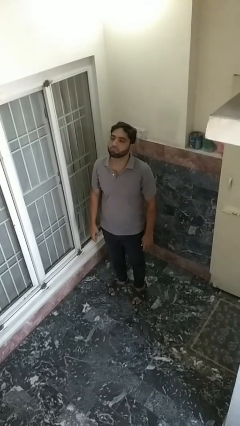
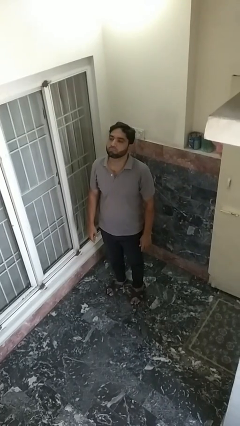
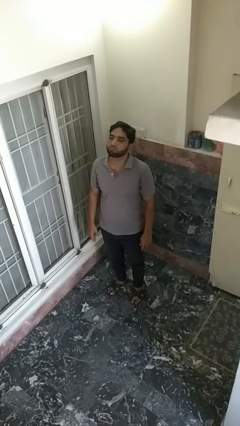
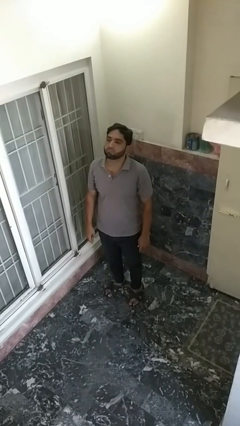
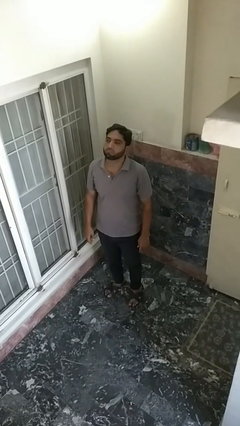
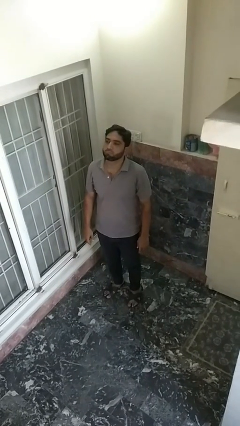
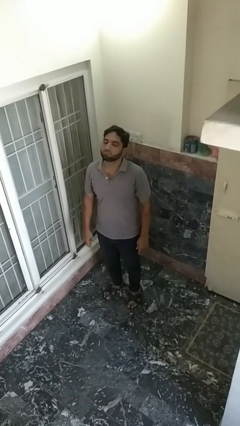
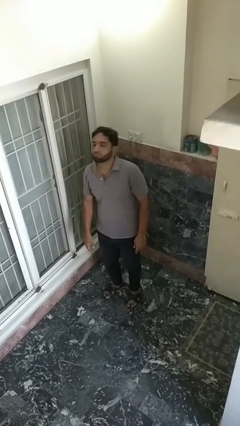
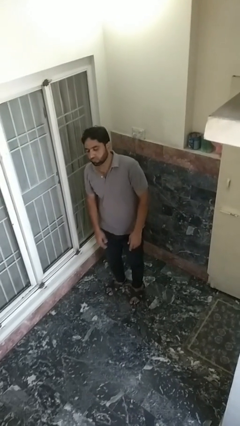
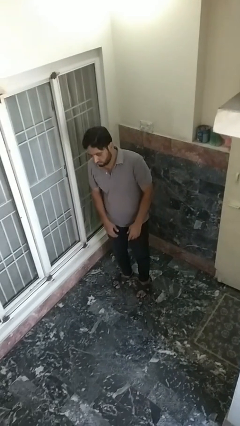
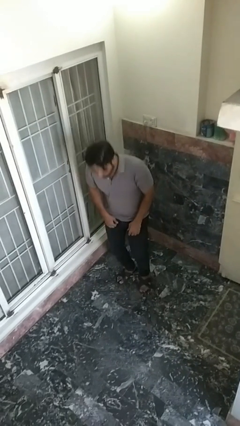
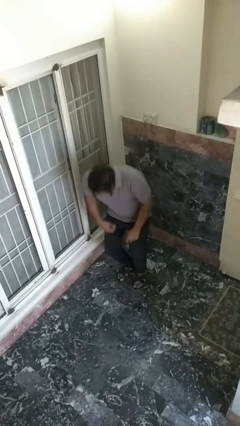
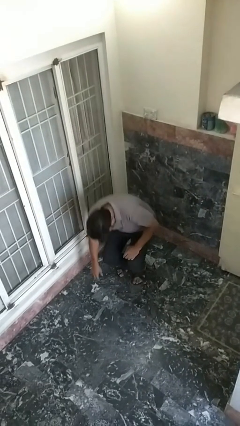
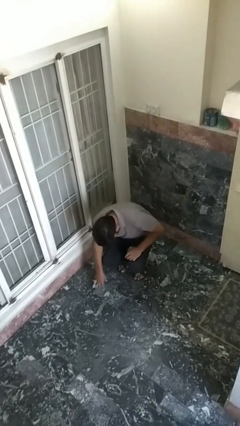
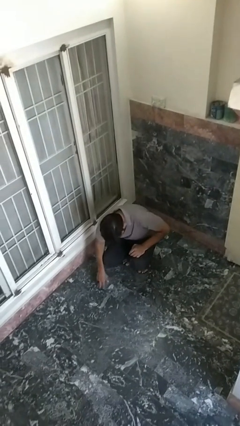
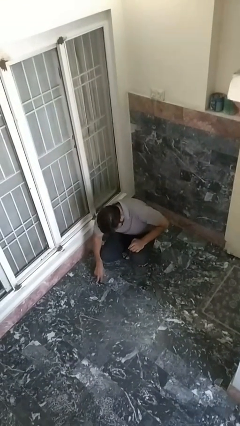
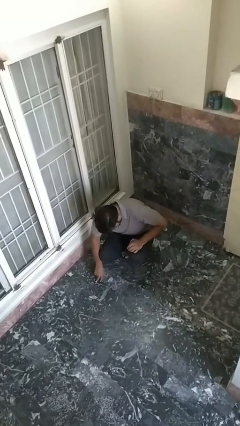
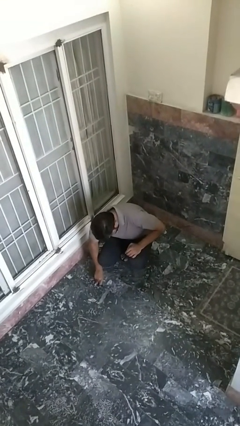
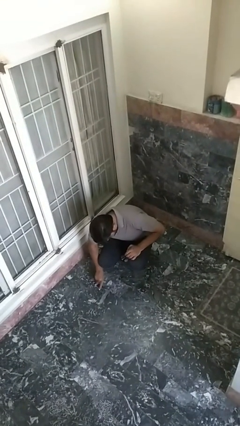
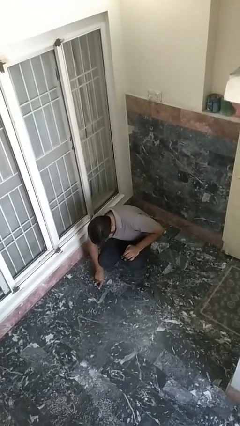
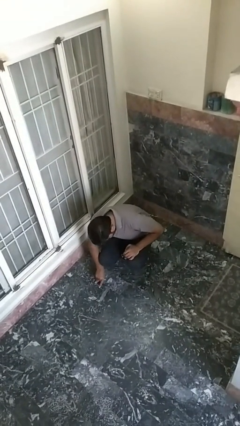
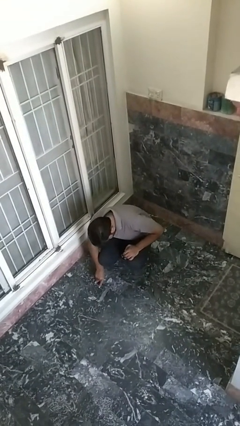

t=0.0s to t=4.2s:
person falls while standing

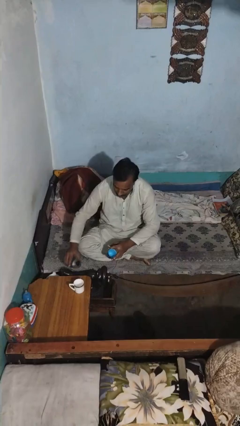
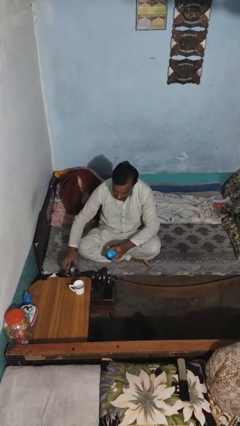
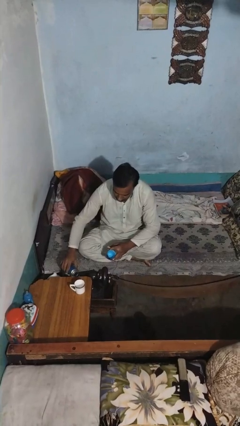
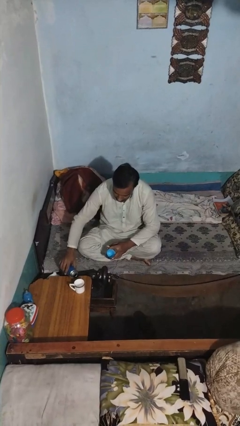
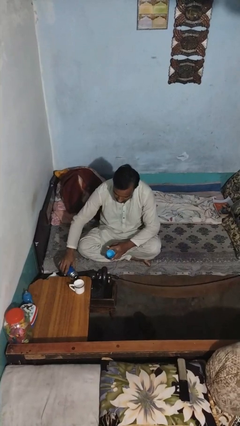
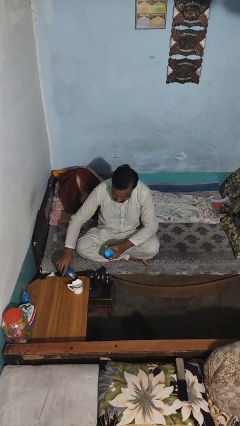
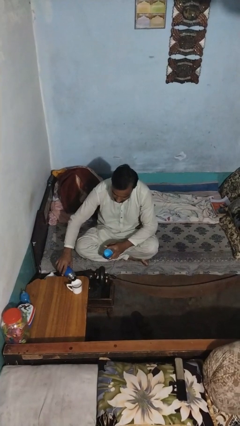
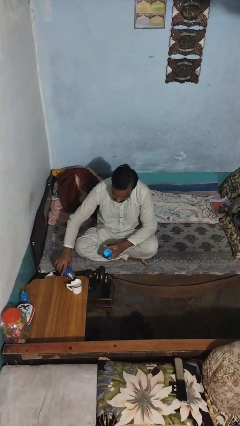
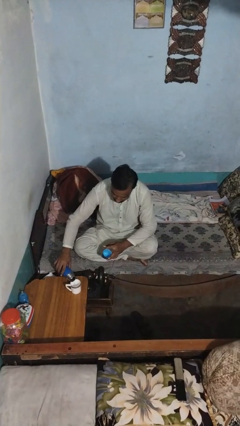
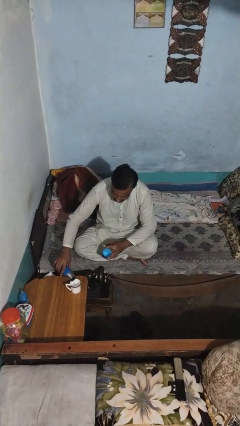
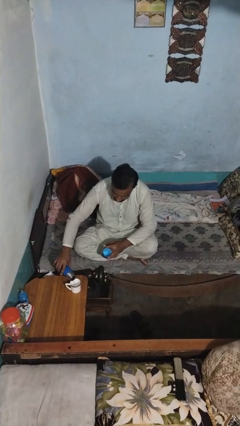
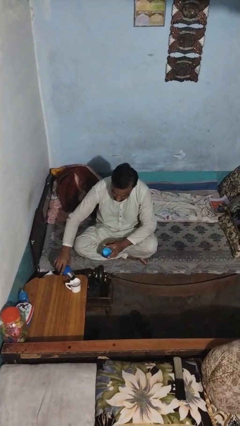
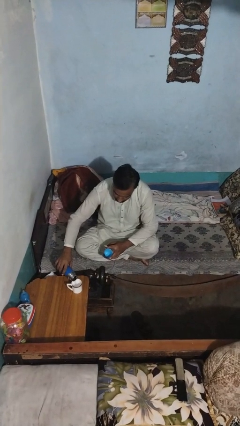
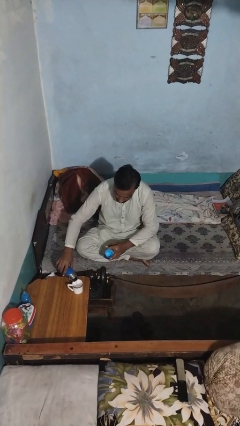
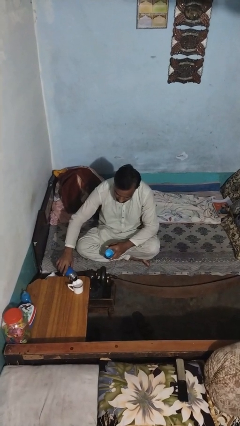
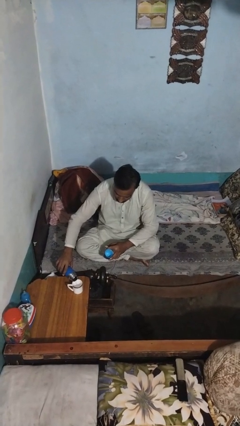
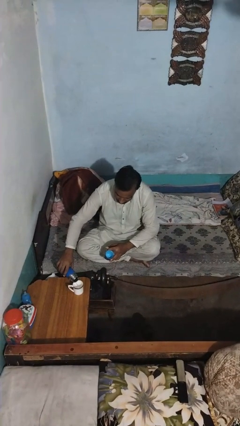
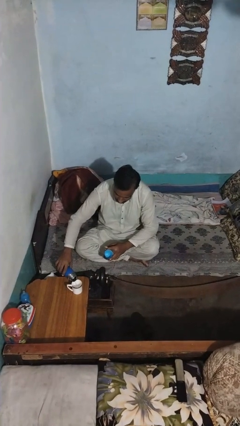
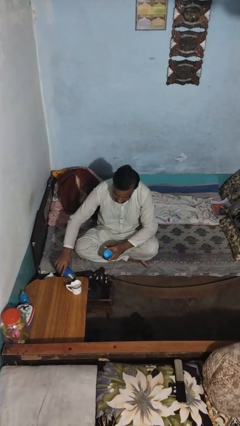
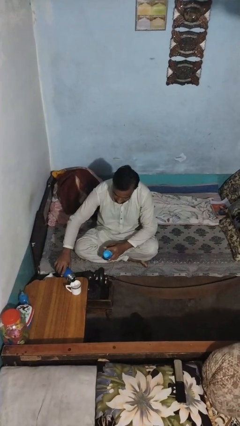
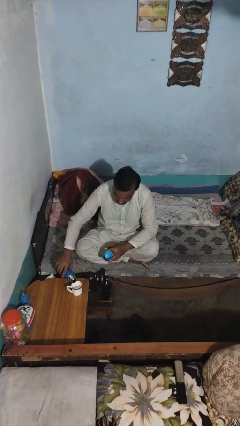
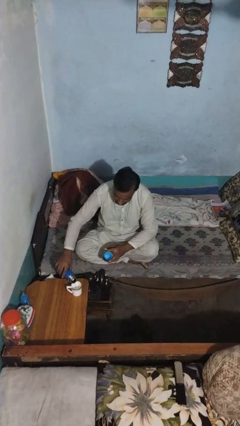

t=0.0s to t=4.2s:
person pours liquid into cup

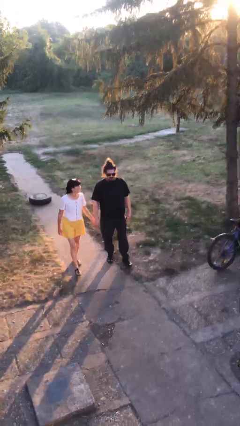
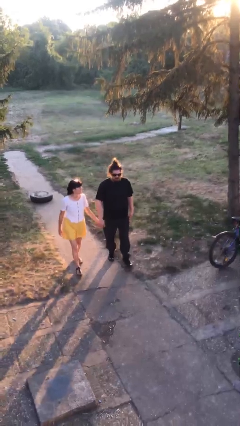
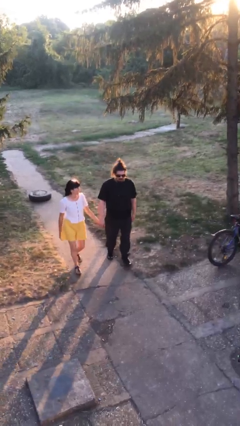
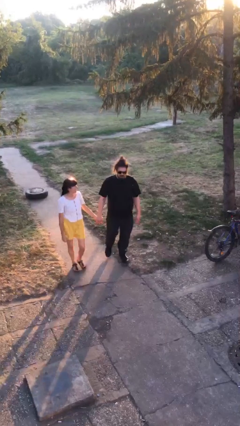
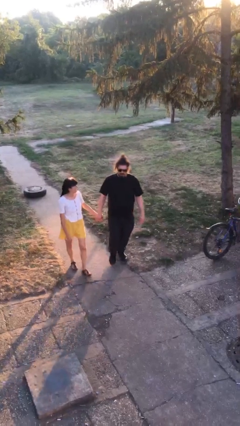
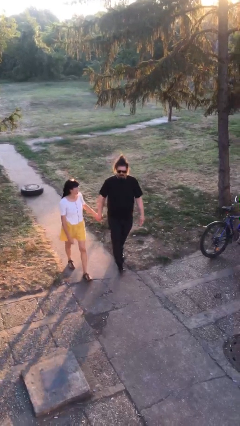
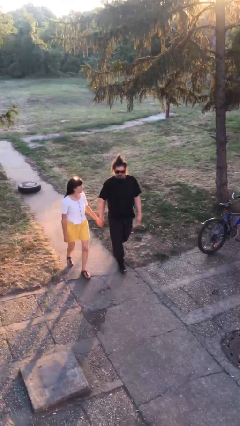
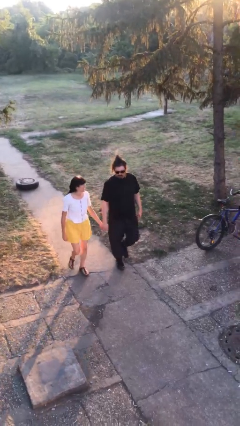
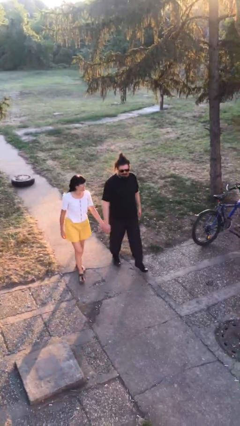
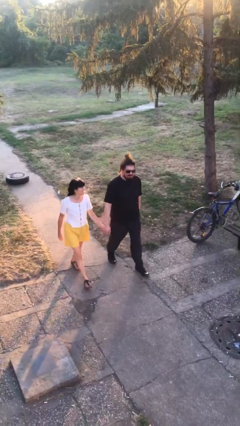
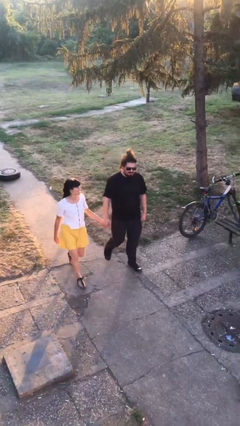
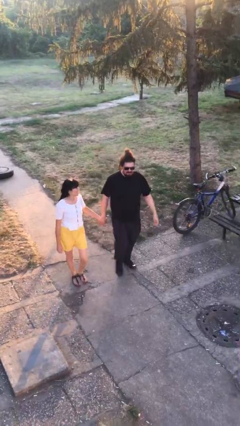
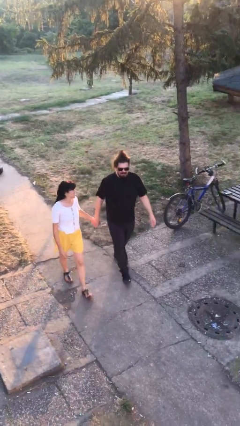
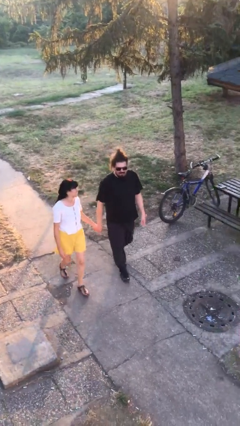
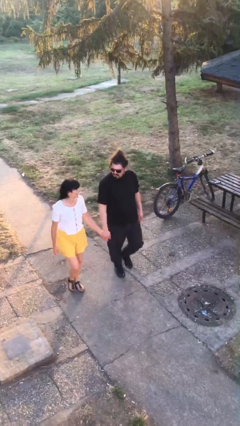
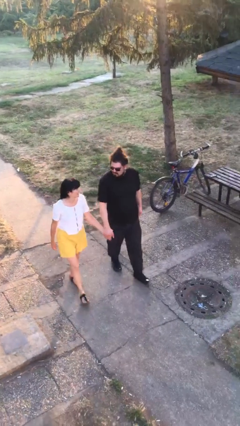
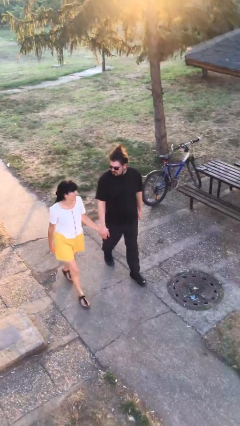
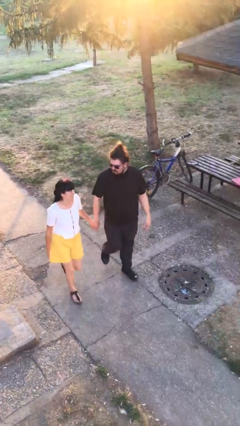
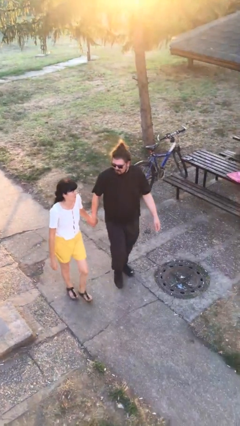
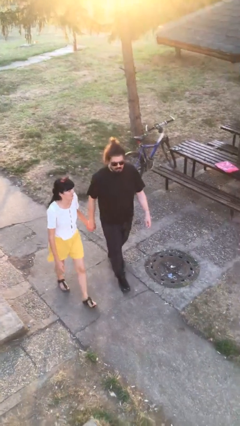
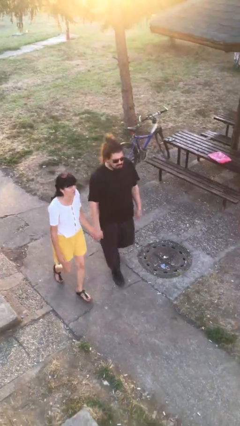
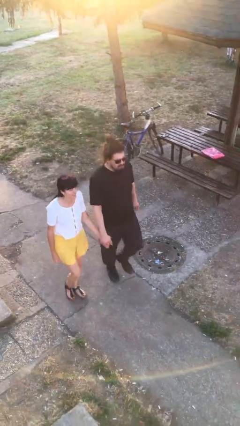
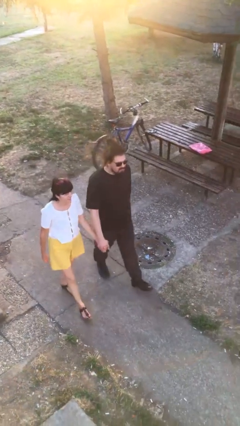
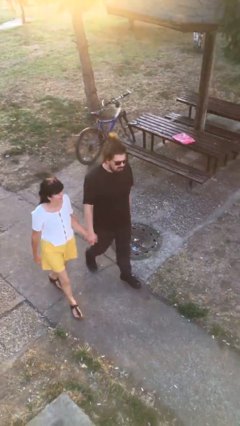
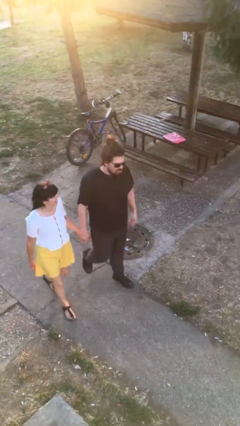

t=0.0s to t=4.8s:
person holds hand

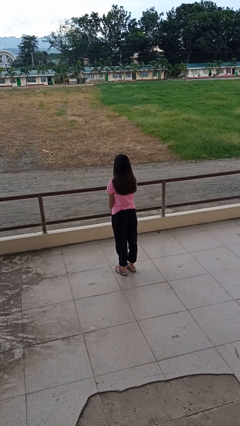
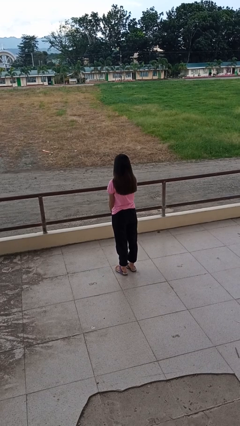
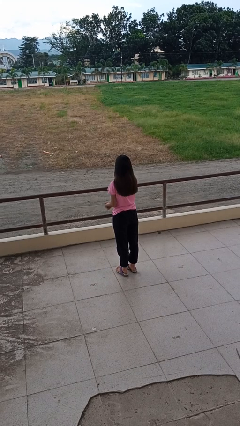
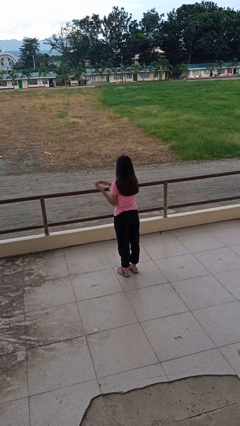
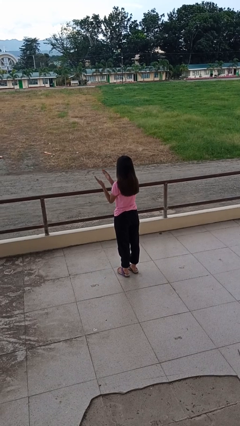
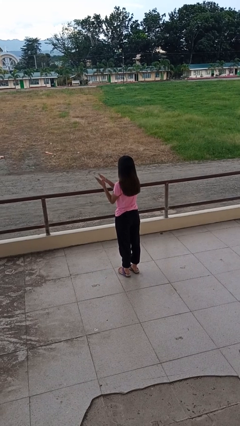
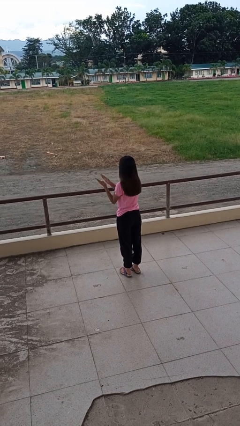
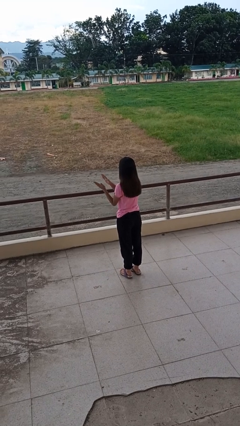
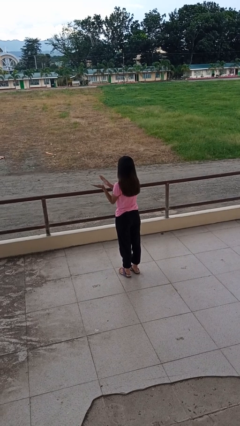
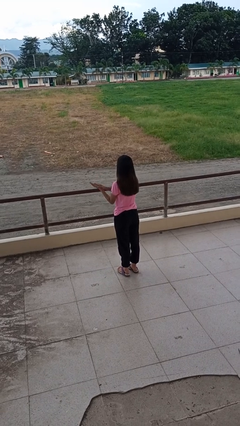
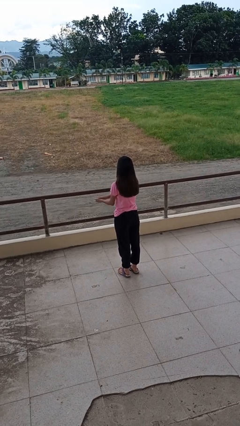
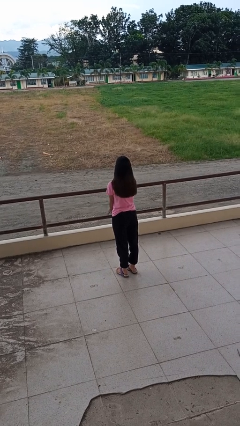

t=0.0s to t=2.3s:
person claps hands

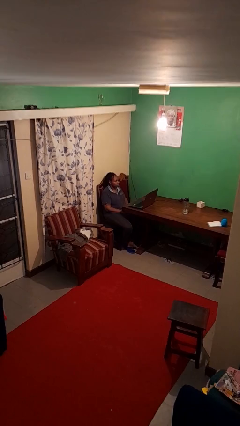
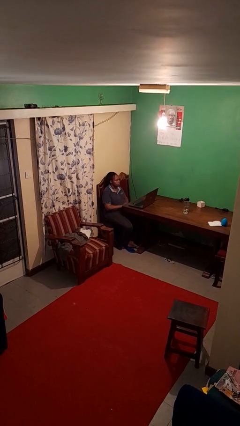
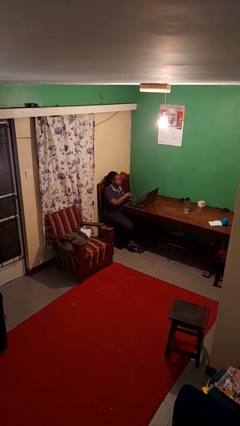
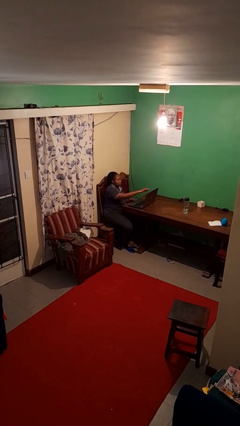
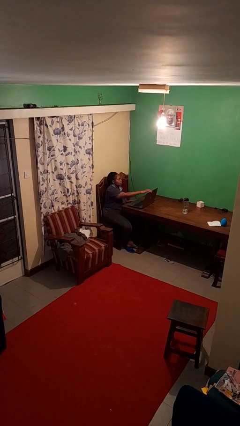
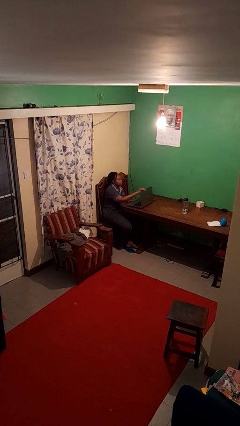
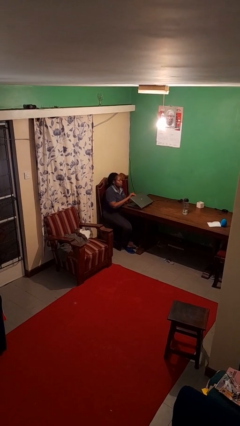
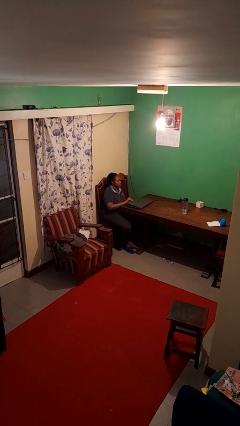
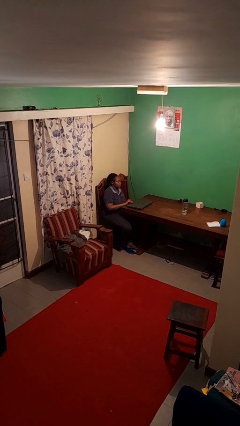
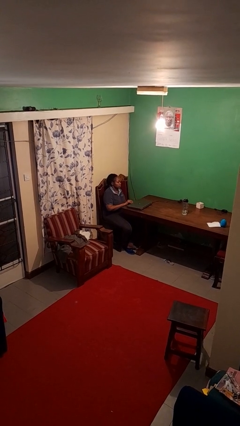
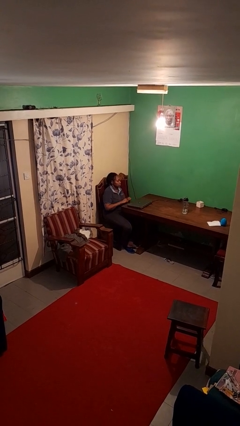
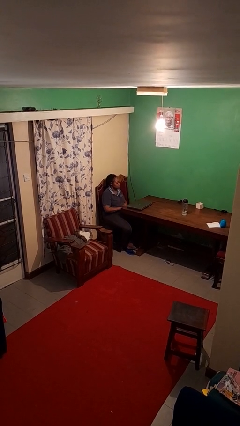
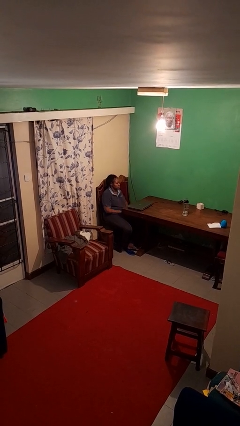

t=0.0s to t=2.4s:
person closes laptop
